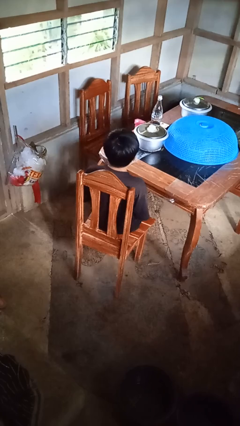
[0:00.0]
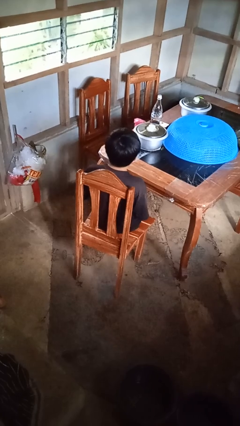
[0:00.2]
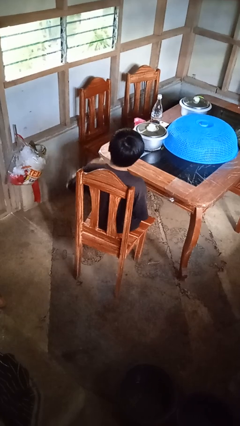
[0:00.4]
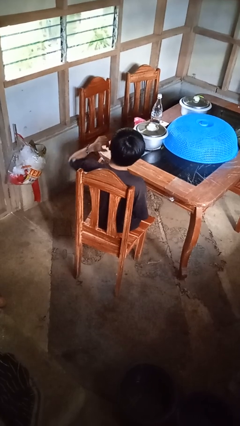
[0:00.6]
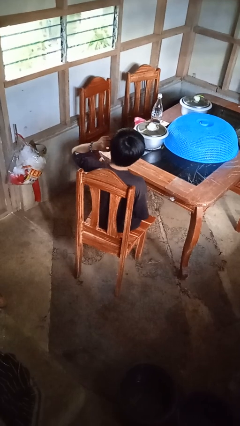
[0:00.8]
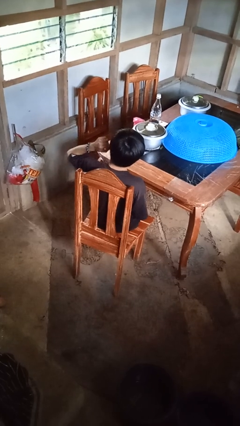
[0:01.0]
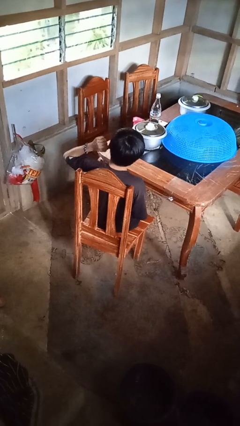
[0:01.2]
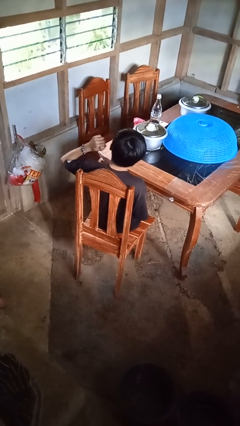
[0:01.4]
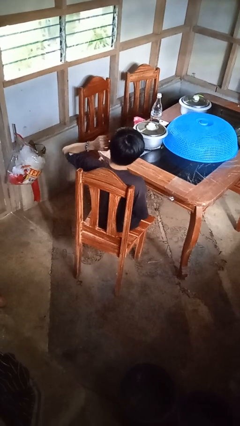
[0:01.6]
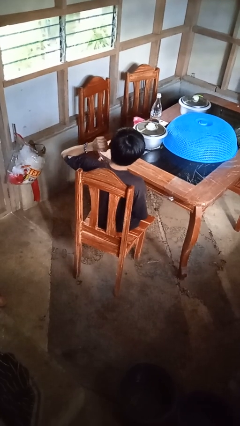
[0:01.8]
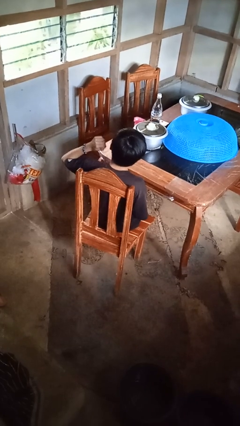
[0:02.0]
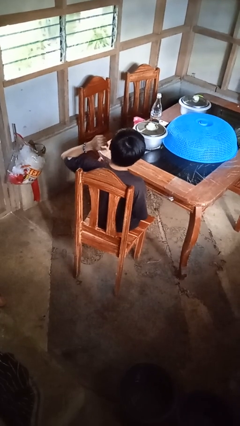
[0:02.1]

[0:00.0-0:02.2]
person touches earlobe

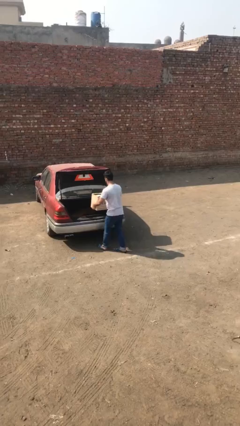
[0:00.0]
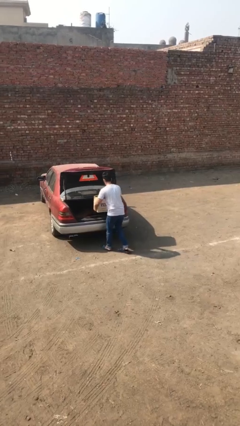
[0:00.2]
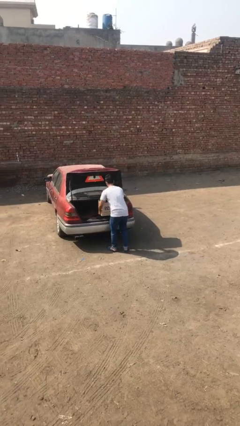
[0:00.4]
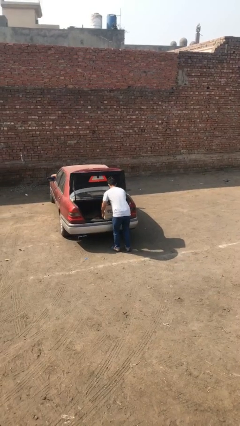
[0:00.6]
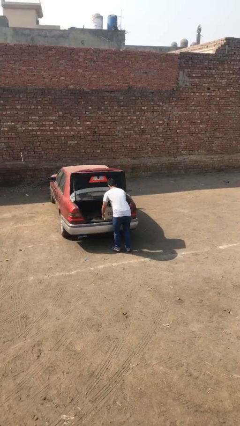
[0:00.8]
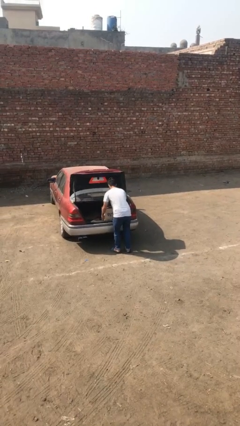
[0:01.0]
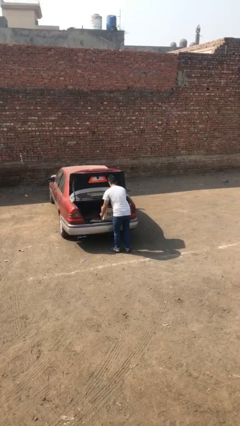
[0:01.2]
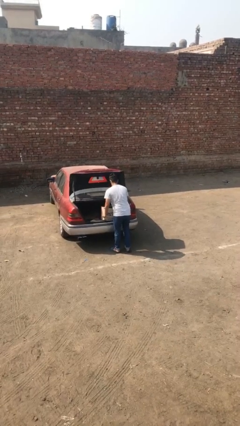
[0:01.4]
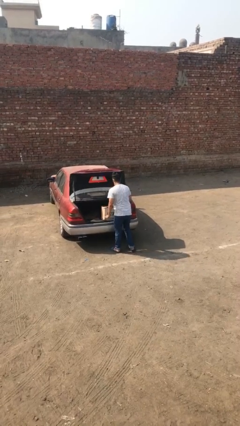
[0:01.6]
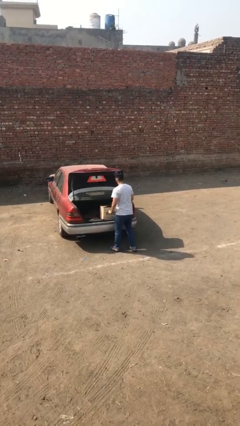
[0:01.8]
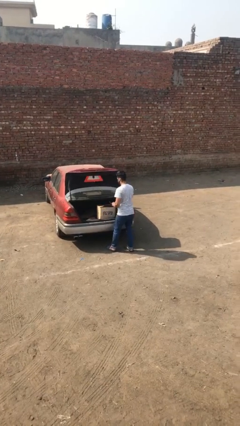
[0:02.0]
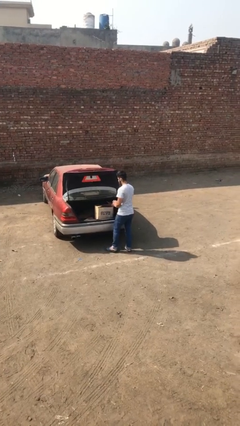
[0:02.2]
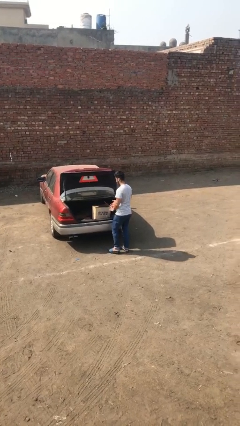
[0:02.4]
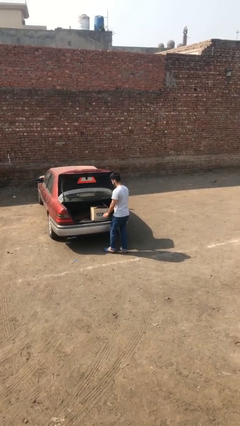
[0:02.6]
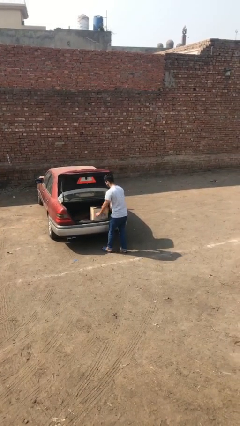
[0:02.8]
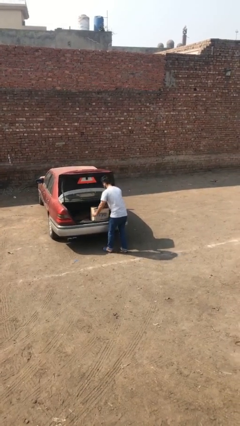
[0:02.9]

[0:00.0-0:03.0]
person loads car

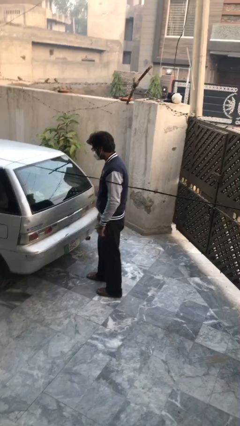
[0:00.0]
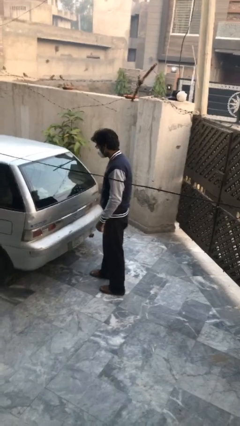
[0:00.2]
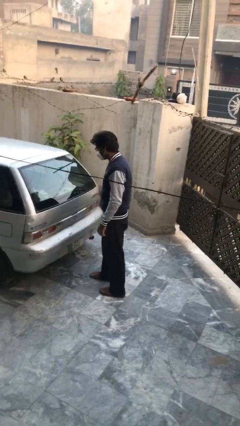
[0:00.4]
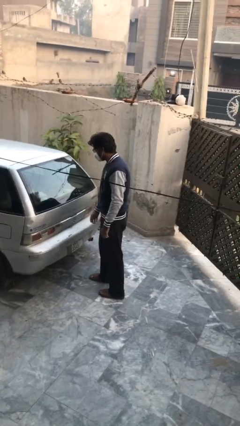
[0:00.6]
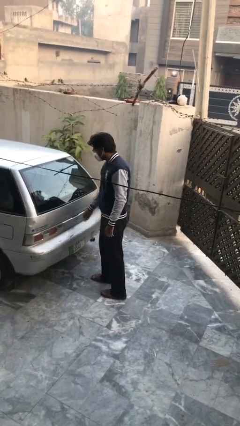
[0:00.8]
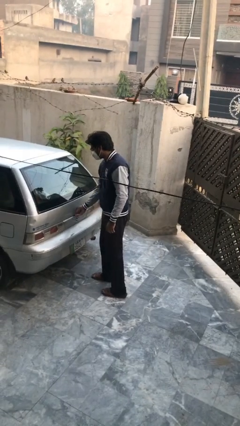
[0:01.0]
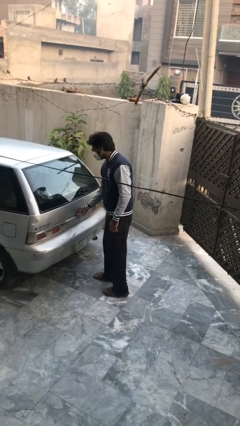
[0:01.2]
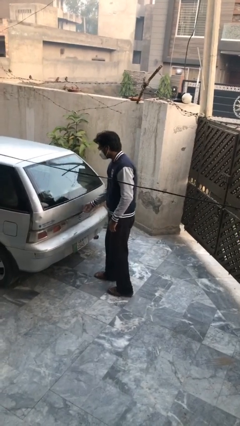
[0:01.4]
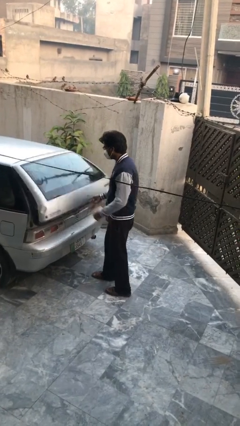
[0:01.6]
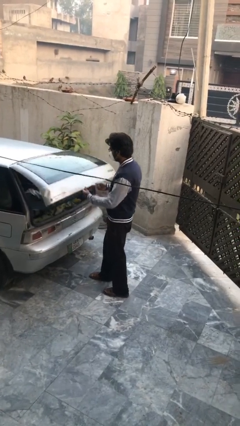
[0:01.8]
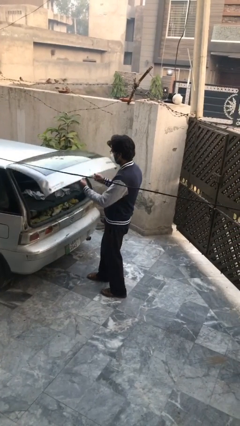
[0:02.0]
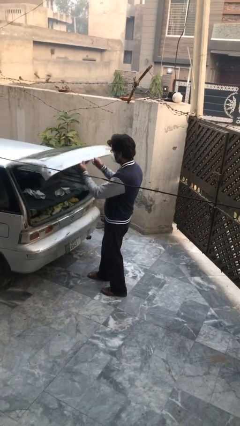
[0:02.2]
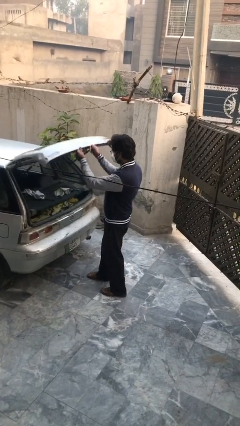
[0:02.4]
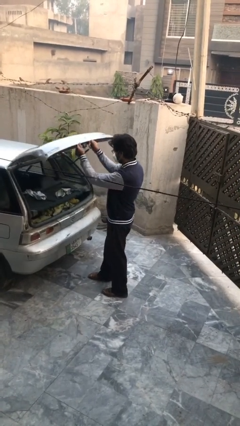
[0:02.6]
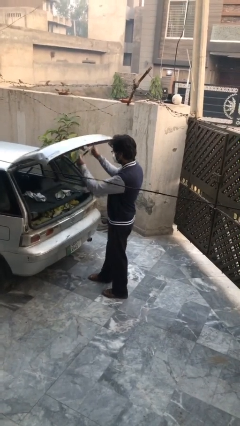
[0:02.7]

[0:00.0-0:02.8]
person opens car trunk

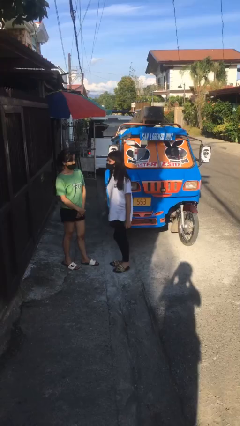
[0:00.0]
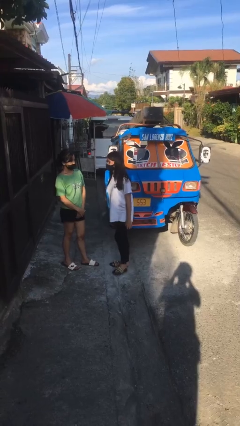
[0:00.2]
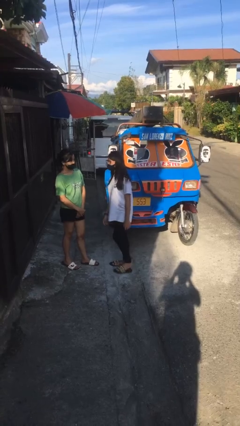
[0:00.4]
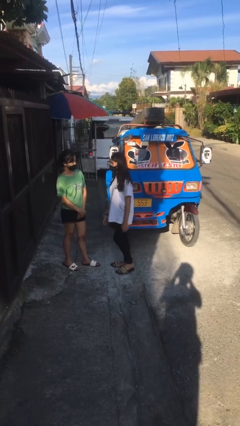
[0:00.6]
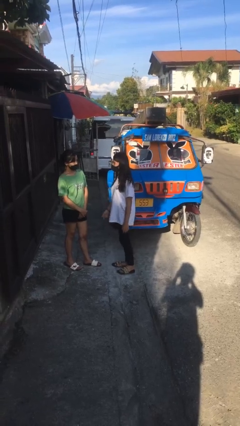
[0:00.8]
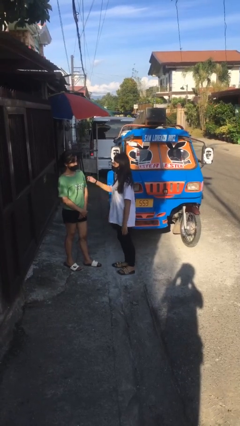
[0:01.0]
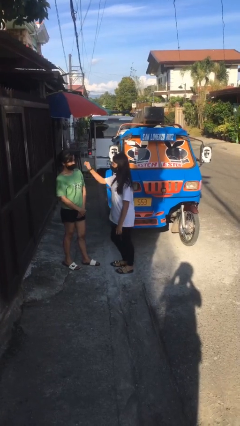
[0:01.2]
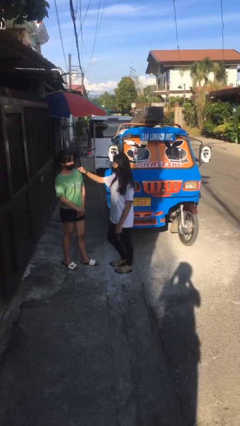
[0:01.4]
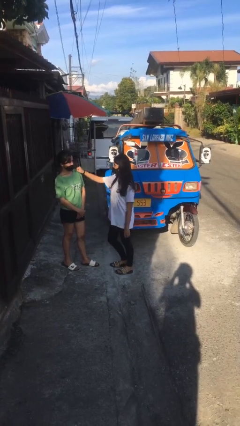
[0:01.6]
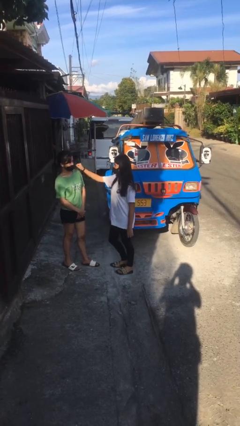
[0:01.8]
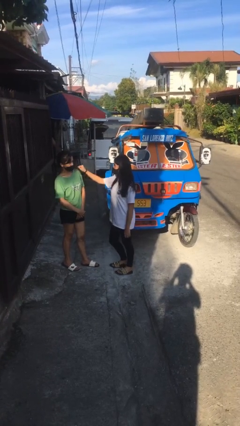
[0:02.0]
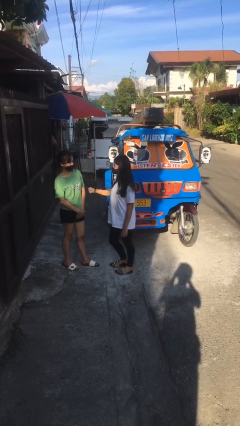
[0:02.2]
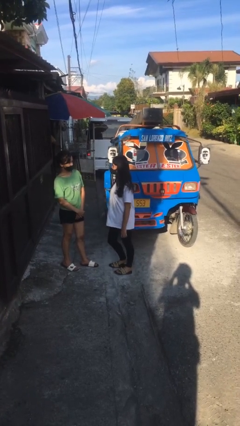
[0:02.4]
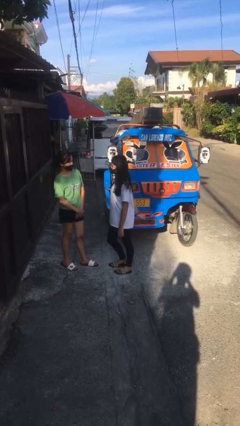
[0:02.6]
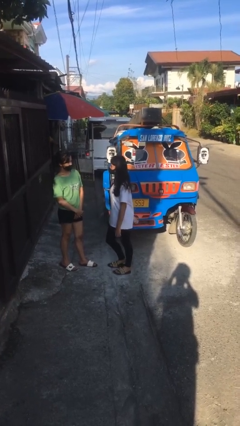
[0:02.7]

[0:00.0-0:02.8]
person pounds shoulders of person

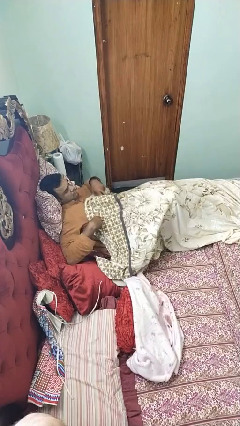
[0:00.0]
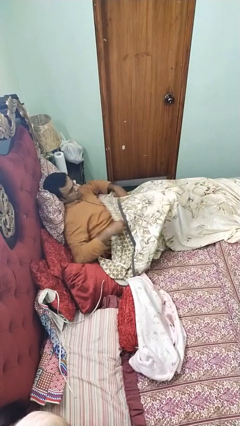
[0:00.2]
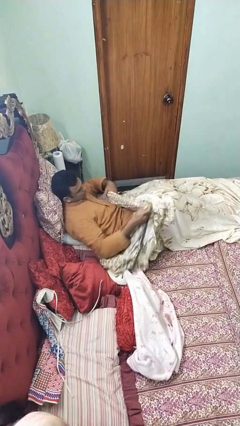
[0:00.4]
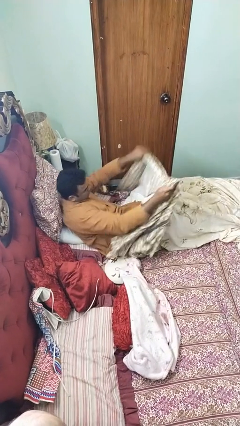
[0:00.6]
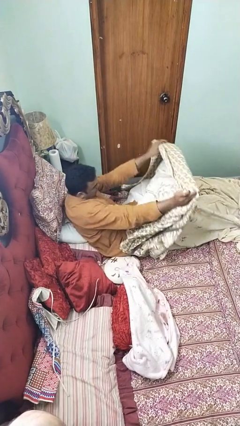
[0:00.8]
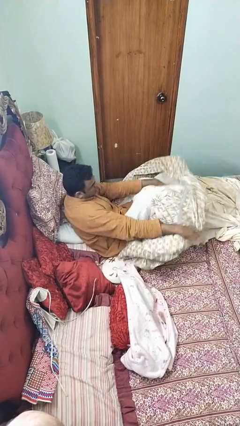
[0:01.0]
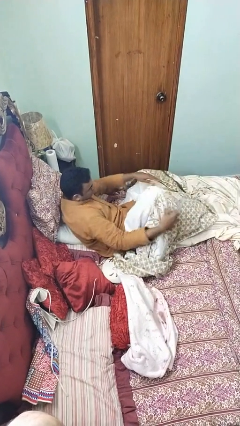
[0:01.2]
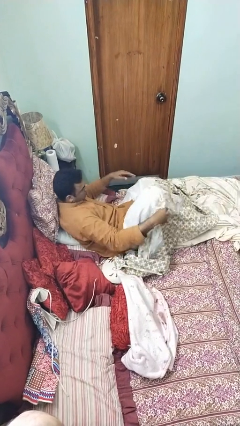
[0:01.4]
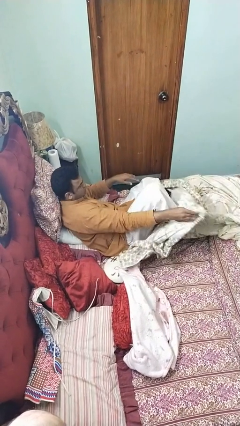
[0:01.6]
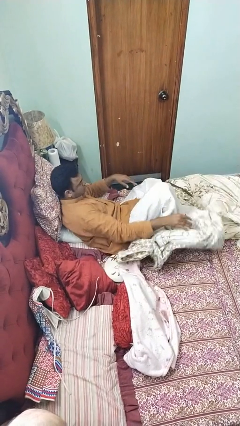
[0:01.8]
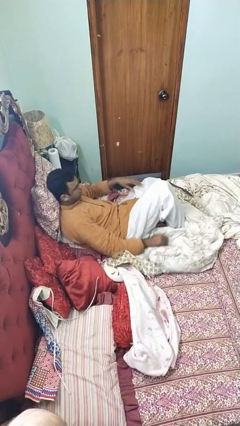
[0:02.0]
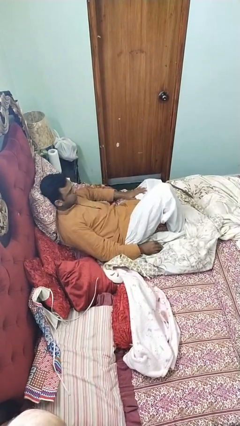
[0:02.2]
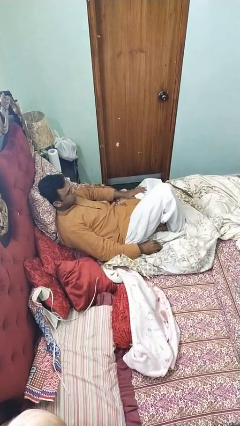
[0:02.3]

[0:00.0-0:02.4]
person uncovers with bedsheets

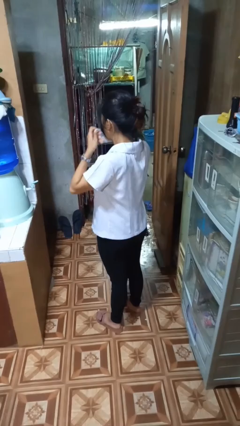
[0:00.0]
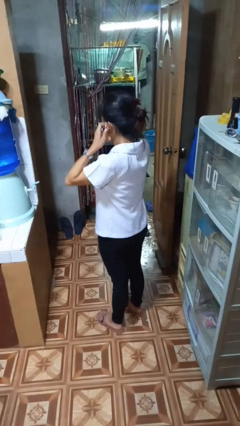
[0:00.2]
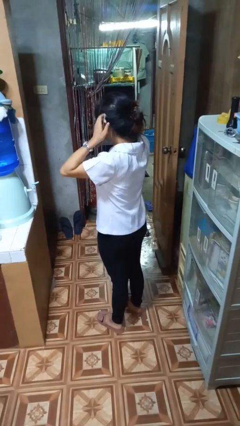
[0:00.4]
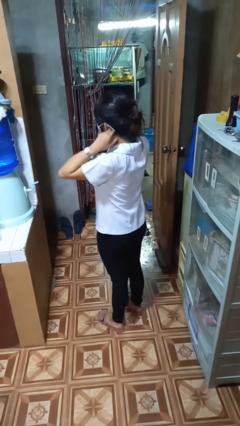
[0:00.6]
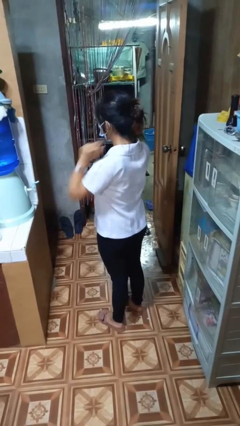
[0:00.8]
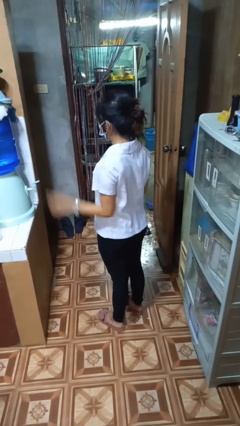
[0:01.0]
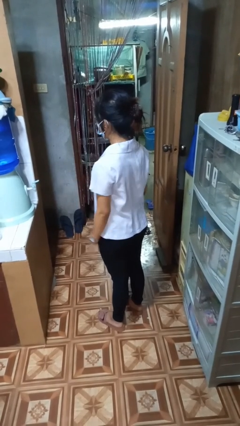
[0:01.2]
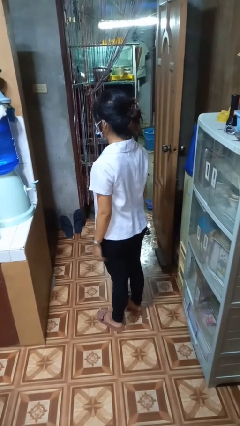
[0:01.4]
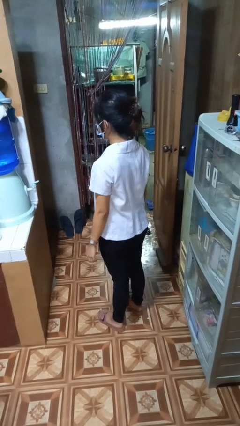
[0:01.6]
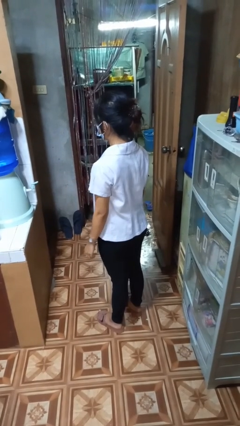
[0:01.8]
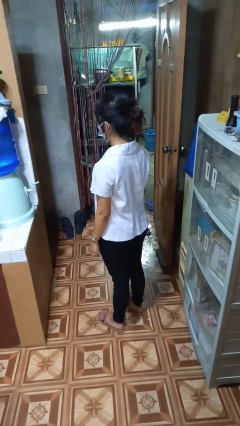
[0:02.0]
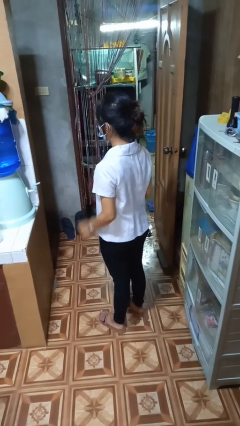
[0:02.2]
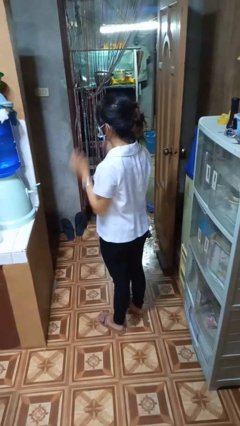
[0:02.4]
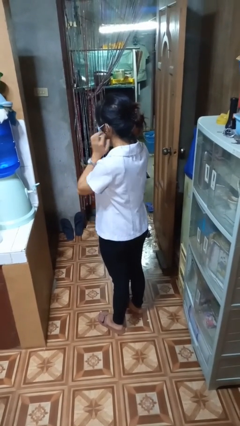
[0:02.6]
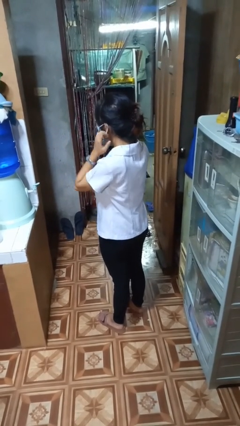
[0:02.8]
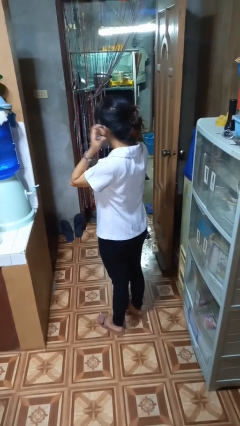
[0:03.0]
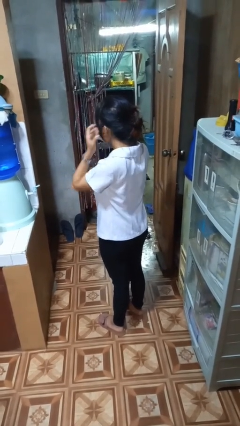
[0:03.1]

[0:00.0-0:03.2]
person puts on facemask

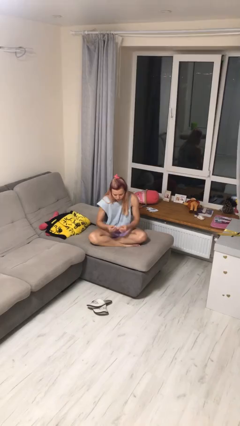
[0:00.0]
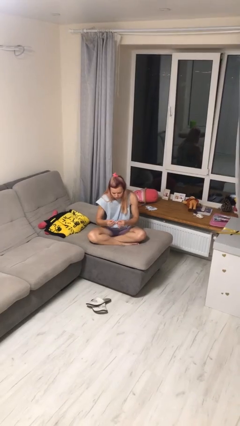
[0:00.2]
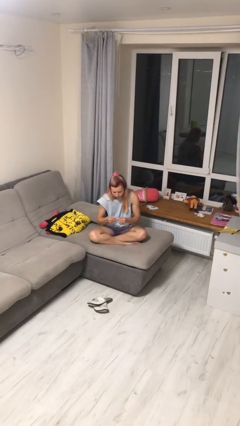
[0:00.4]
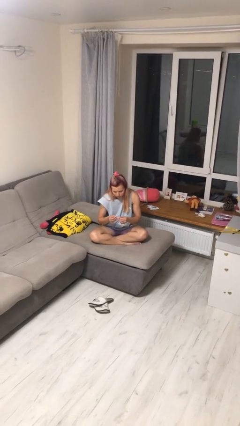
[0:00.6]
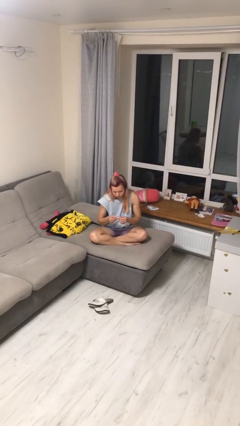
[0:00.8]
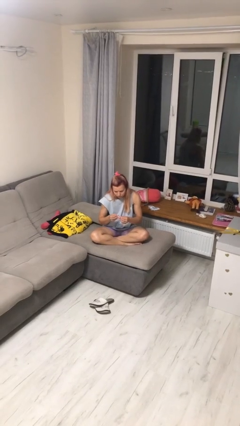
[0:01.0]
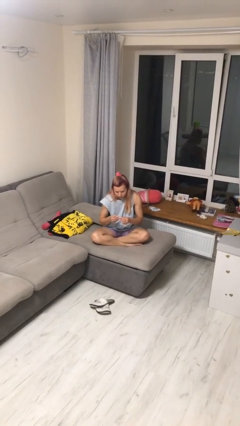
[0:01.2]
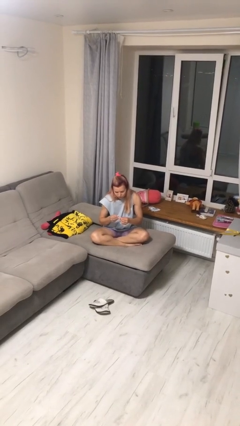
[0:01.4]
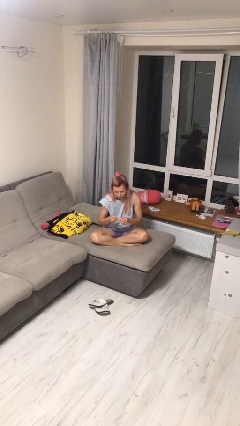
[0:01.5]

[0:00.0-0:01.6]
person clips fingernails
